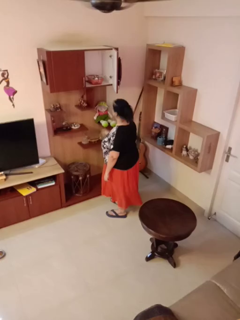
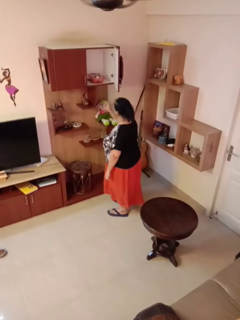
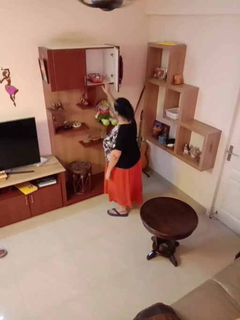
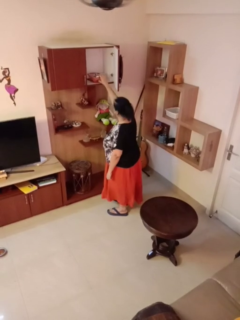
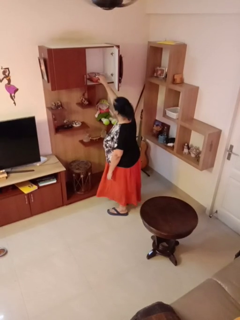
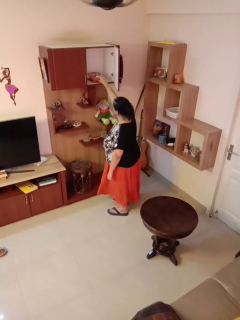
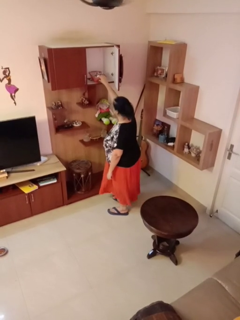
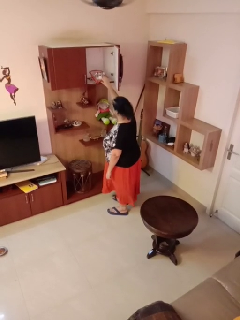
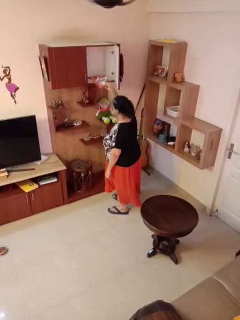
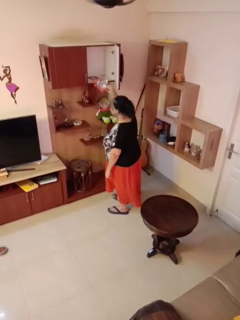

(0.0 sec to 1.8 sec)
person picks up object from cabinet

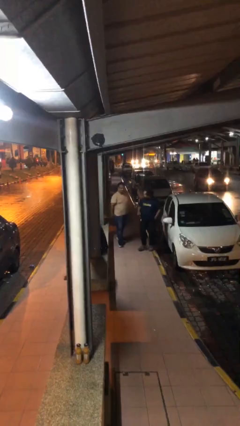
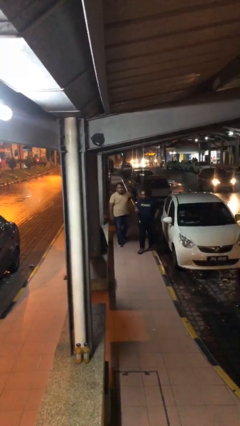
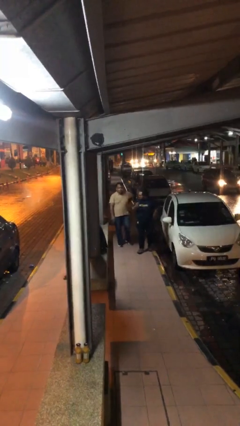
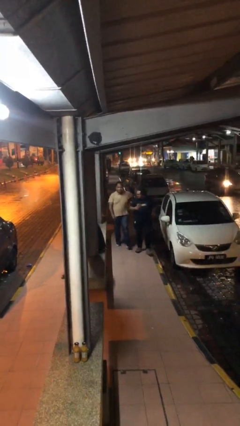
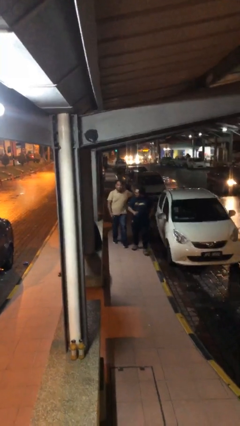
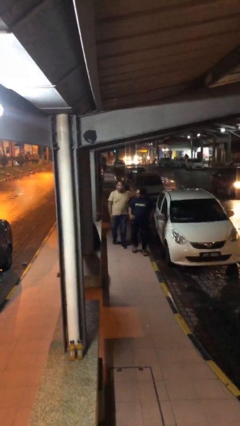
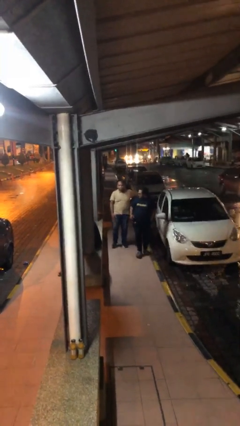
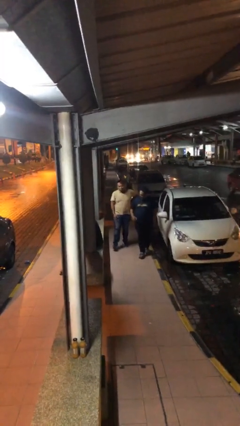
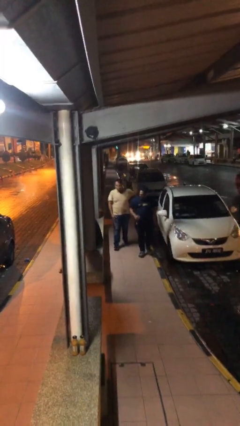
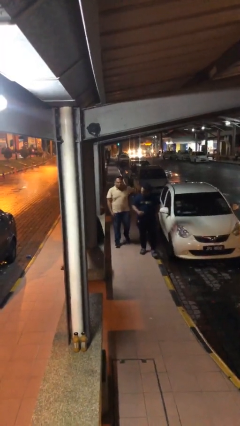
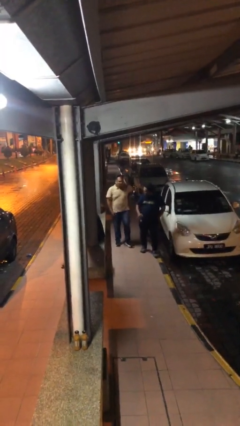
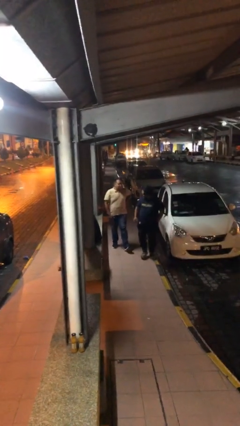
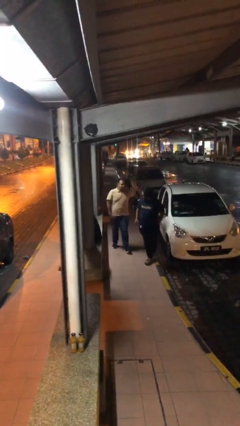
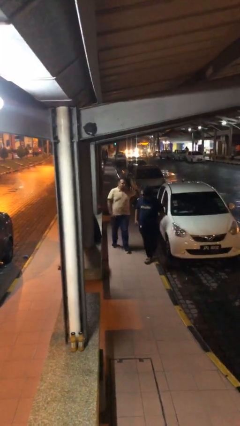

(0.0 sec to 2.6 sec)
person talks to person

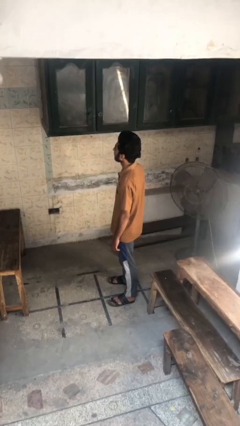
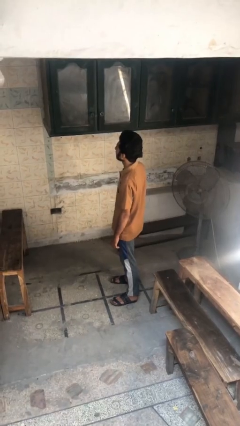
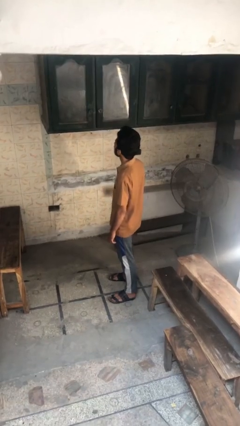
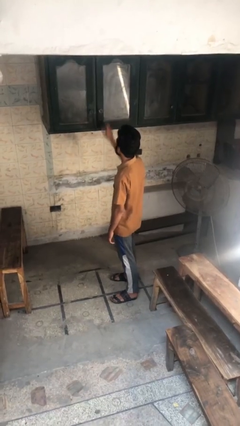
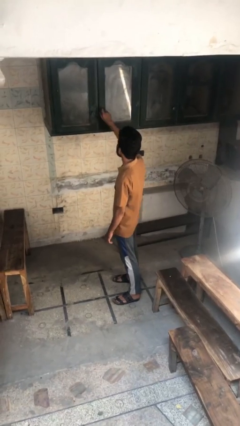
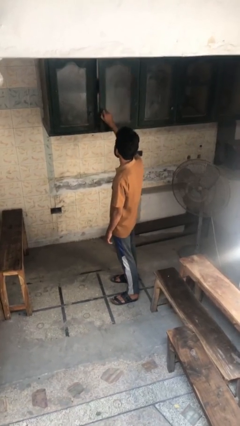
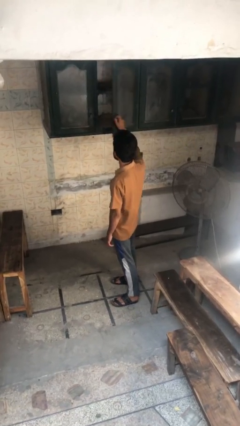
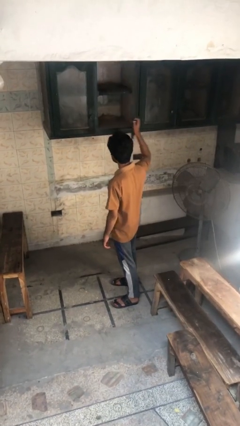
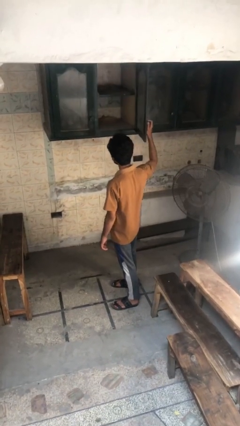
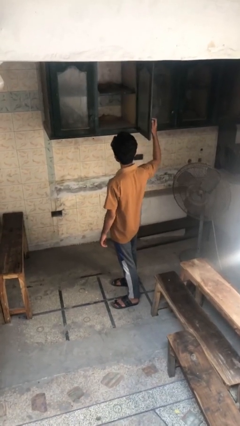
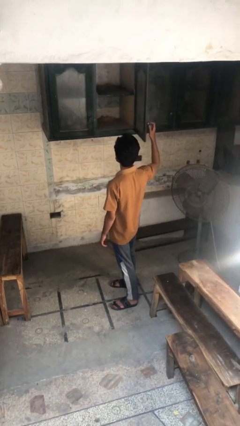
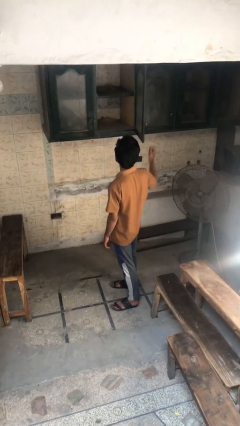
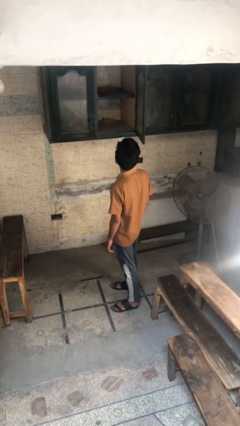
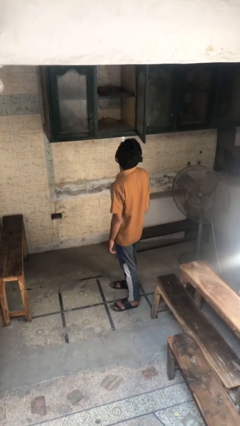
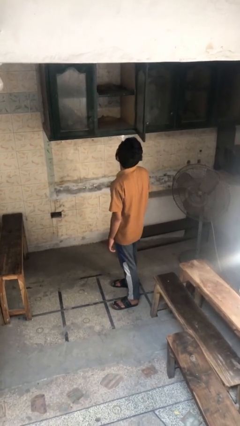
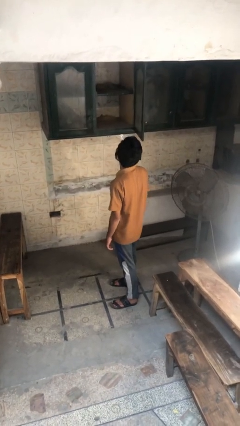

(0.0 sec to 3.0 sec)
person opens cabinet

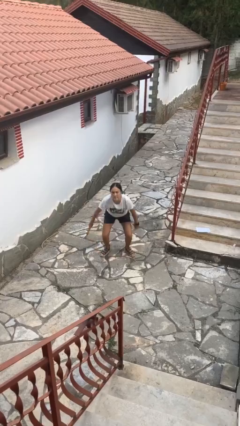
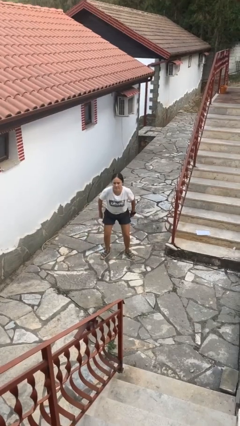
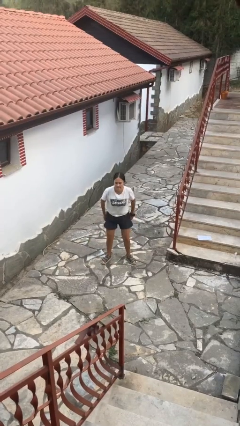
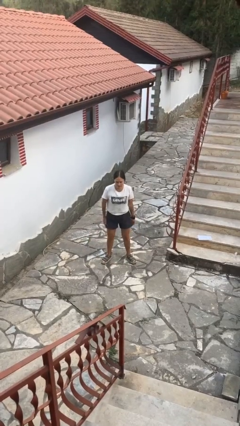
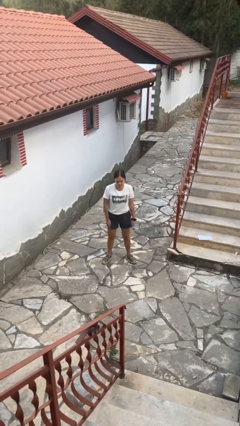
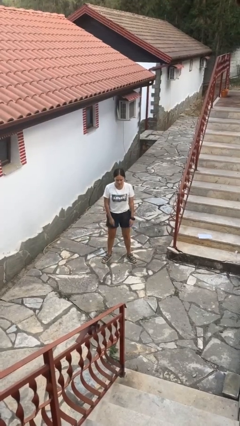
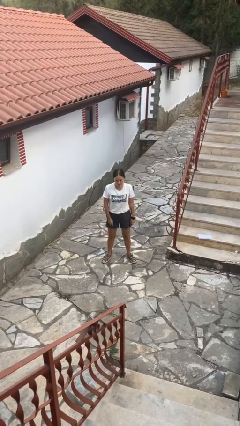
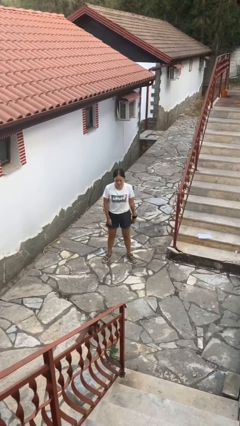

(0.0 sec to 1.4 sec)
person stands up

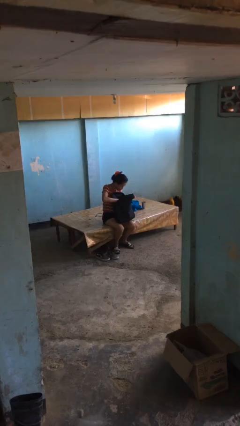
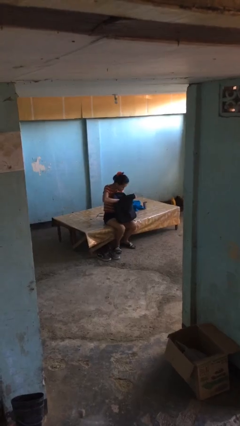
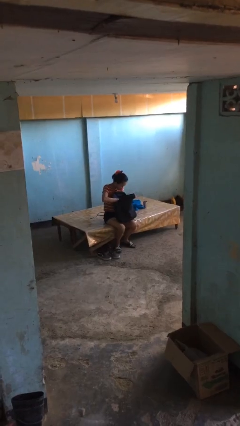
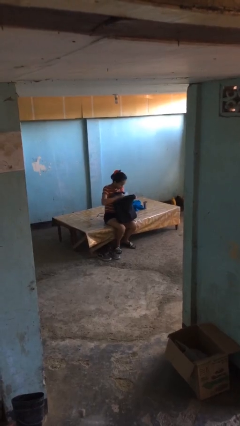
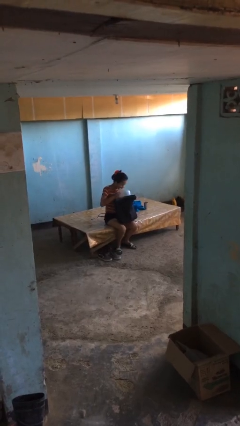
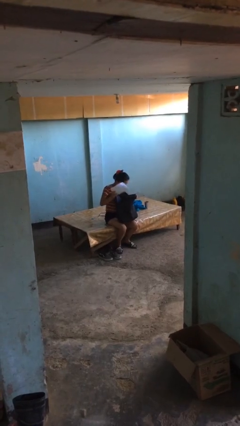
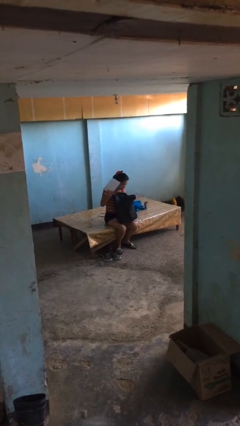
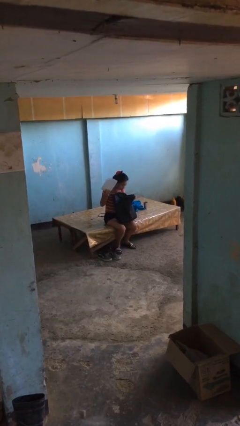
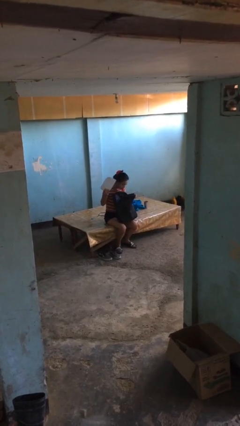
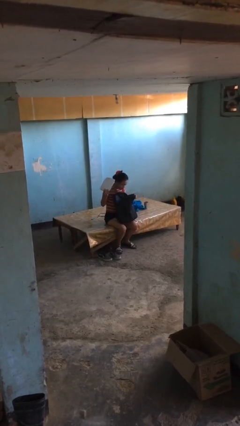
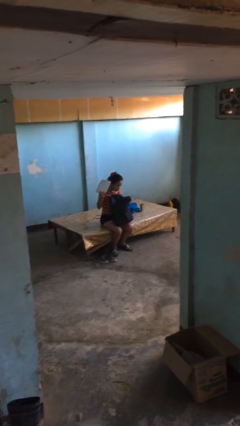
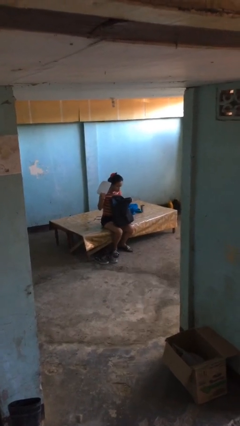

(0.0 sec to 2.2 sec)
person takes object from backpack

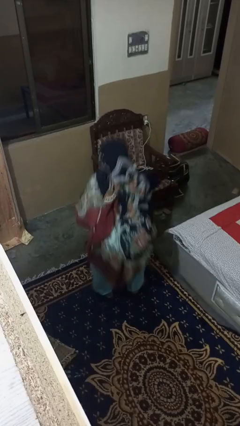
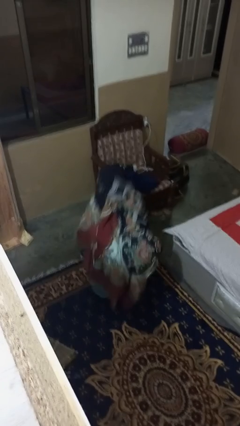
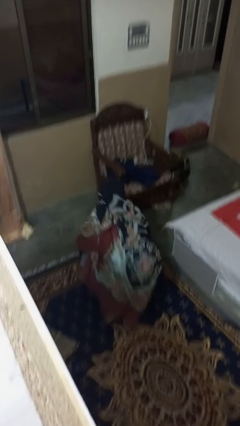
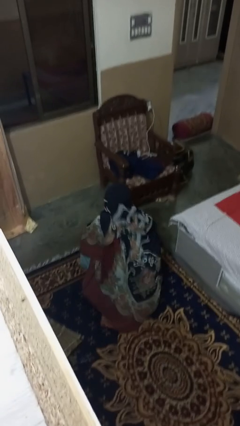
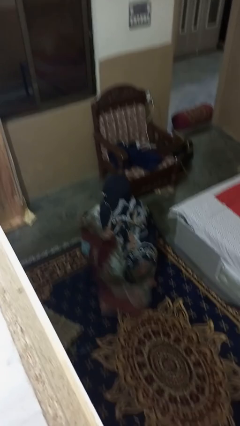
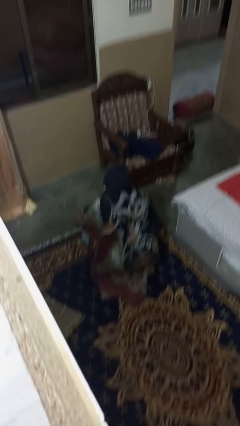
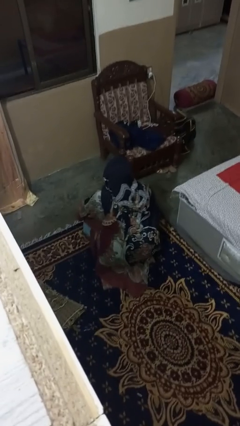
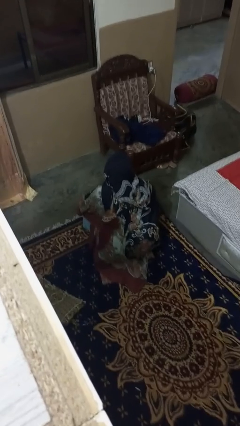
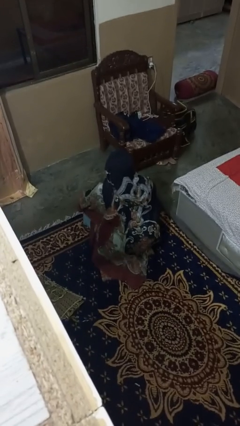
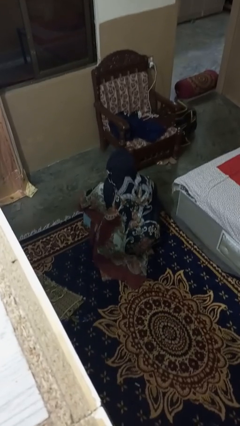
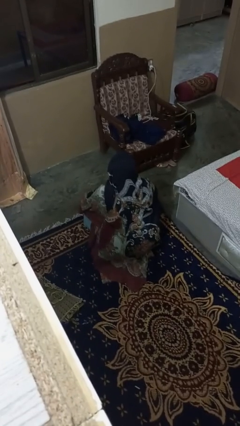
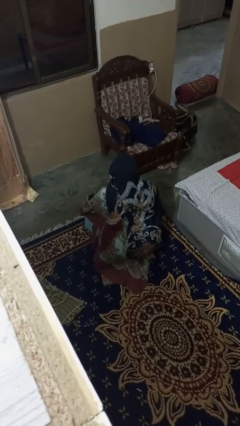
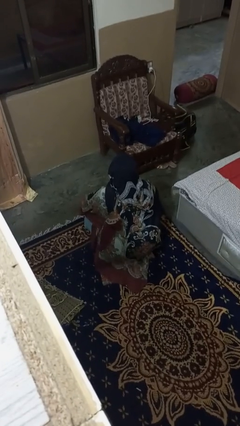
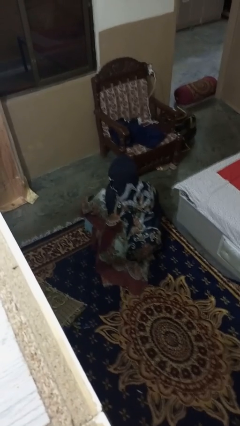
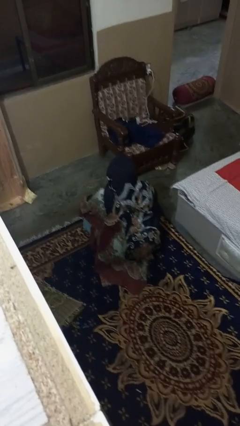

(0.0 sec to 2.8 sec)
person squats

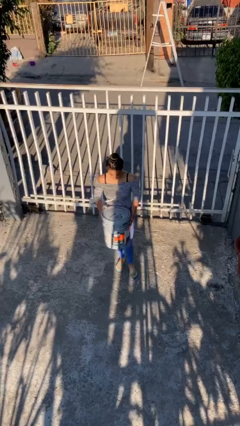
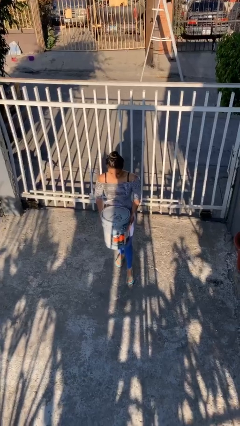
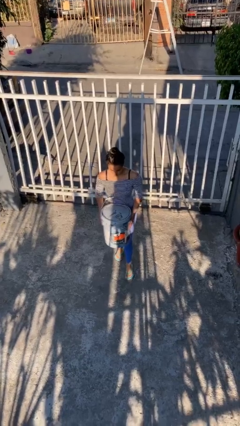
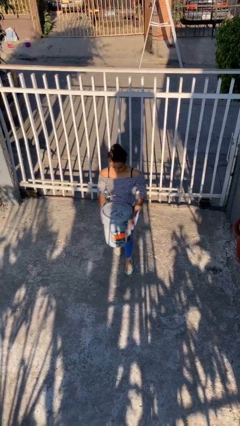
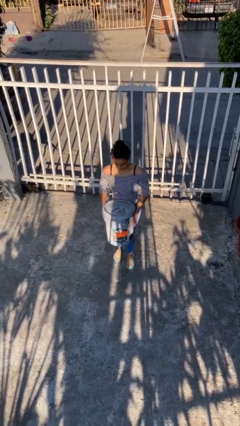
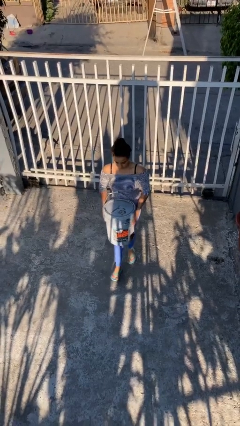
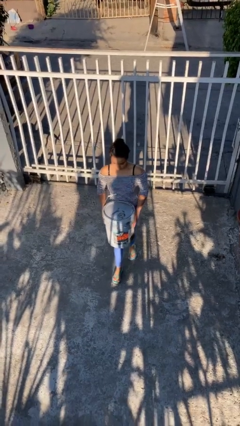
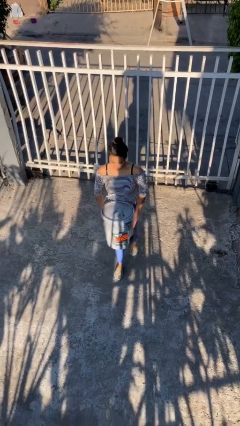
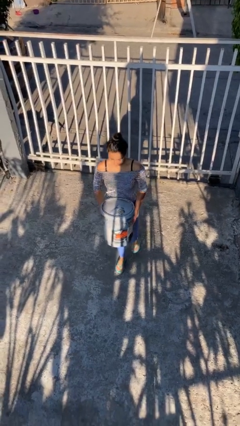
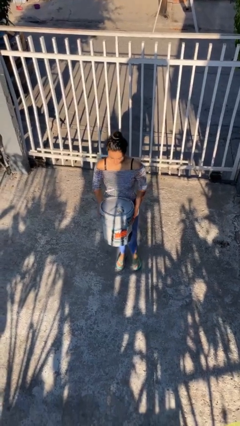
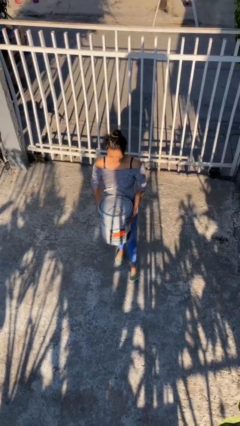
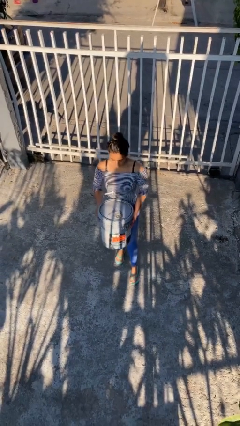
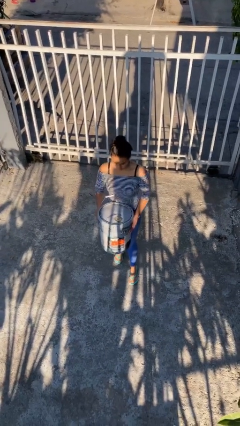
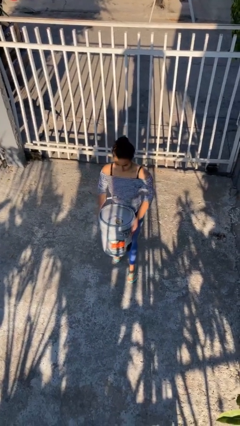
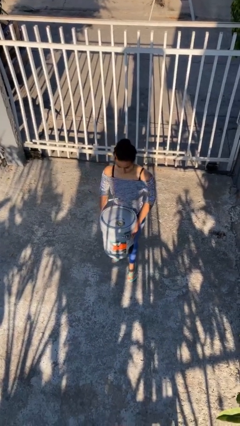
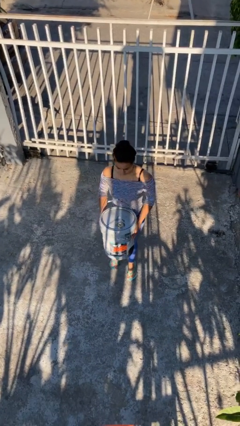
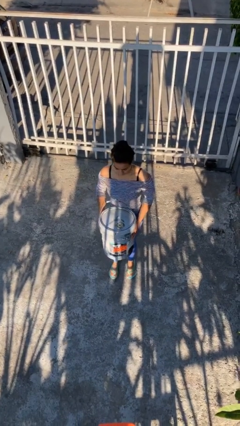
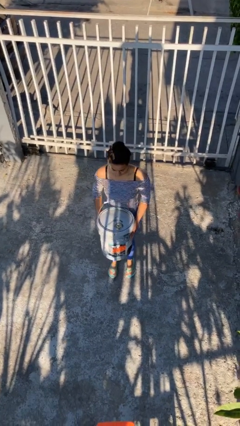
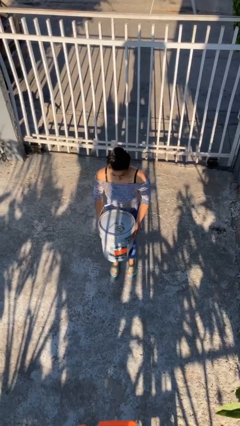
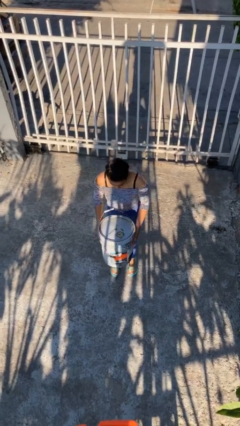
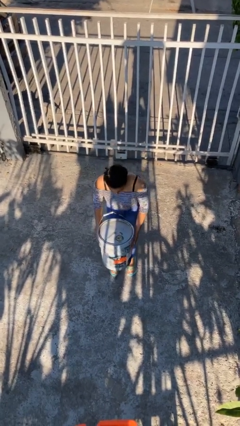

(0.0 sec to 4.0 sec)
person carries heavy object
